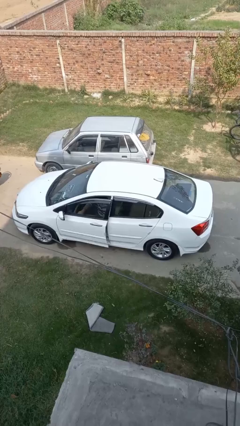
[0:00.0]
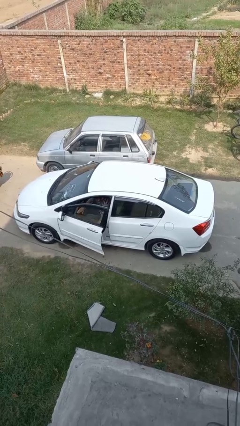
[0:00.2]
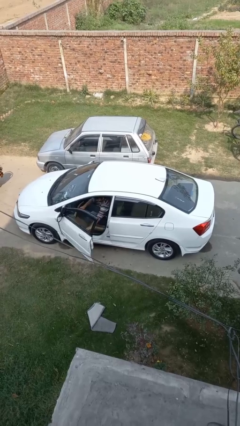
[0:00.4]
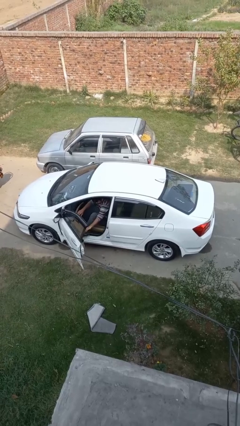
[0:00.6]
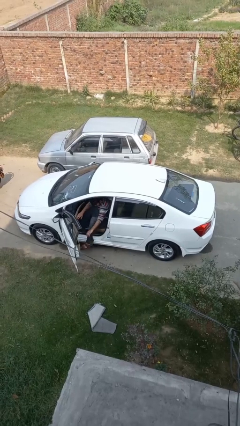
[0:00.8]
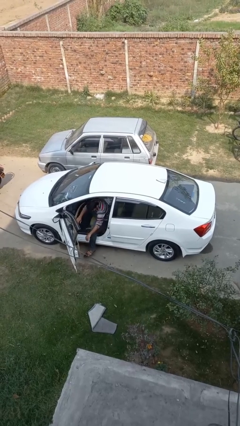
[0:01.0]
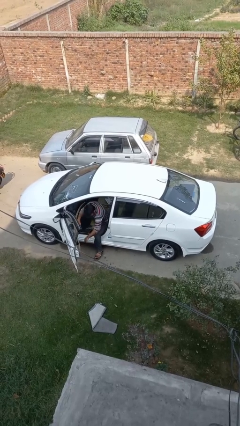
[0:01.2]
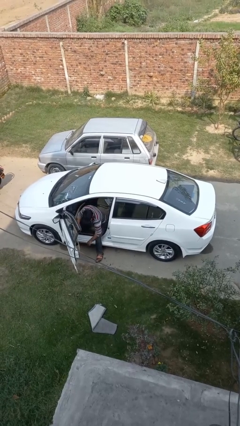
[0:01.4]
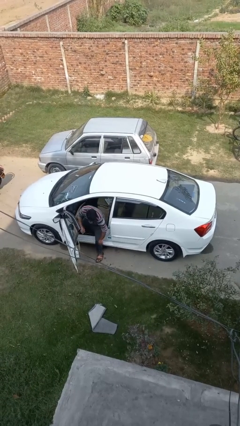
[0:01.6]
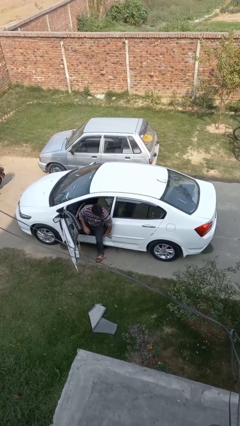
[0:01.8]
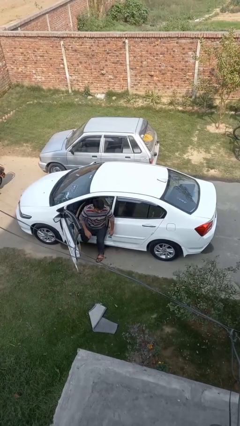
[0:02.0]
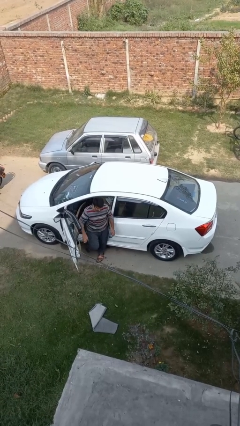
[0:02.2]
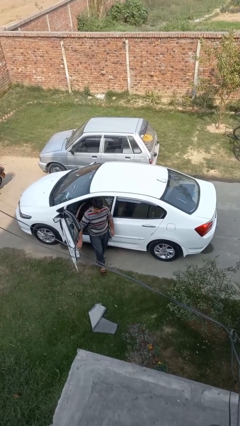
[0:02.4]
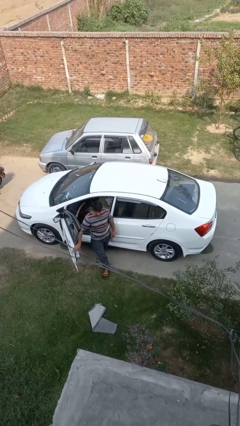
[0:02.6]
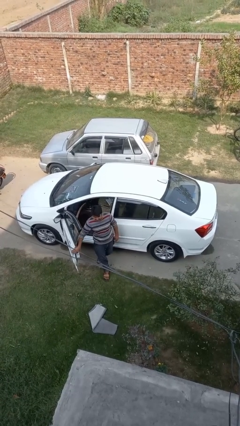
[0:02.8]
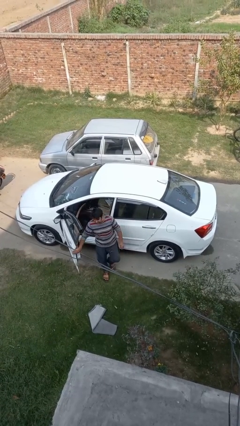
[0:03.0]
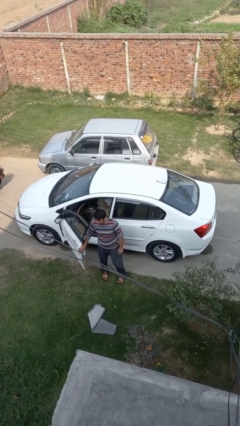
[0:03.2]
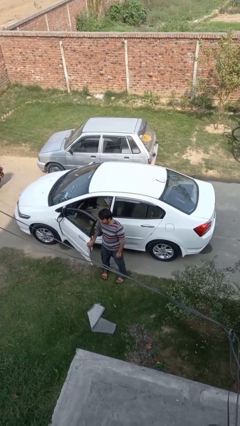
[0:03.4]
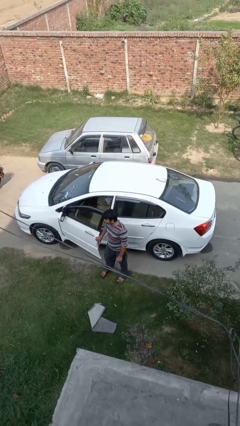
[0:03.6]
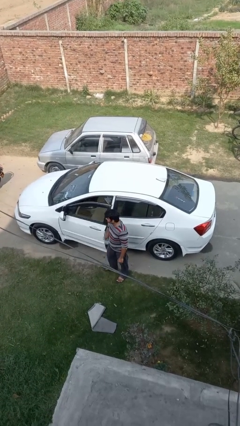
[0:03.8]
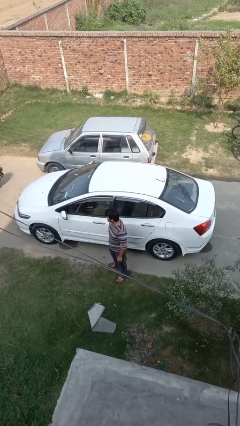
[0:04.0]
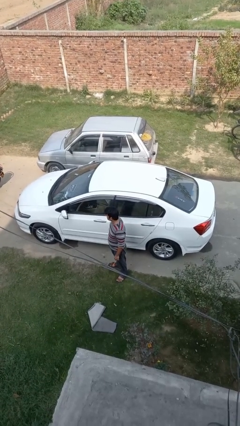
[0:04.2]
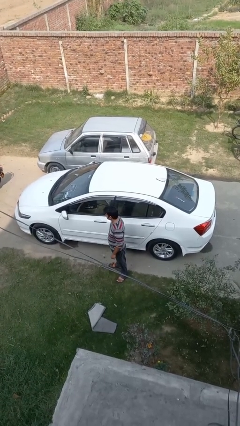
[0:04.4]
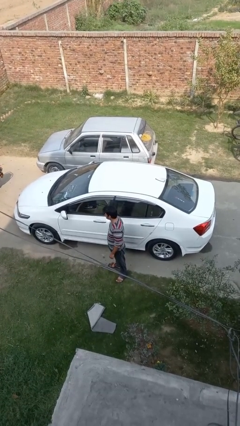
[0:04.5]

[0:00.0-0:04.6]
car drops off person

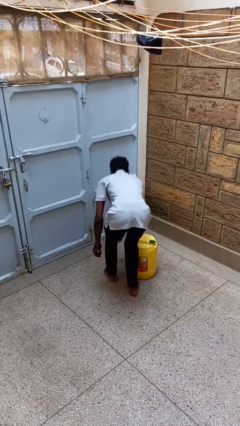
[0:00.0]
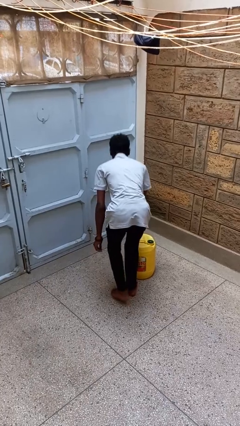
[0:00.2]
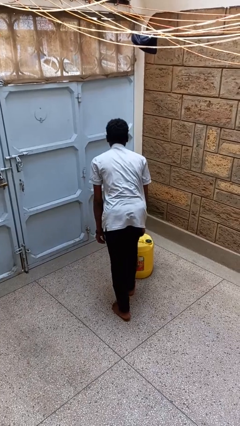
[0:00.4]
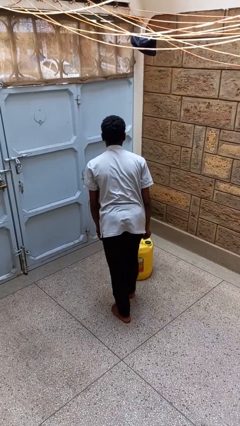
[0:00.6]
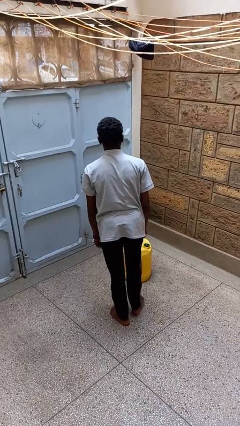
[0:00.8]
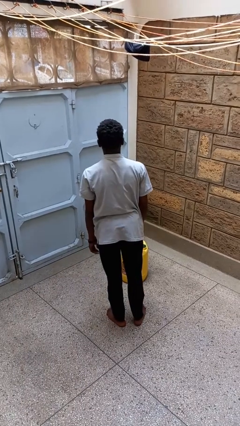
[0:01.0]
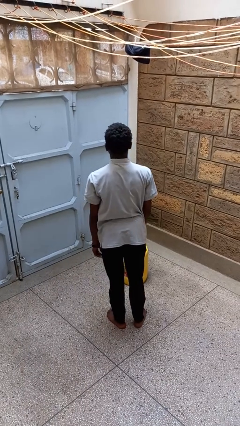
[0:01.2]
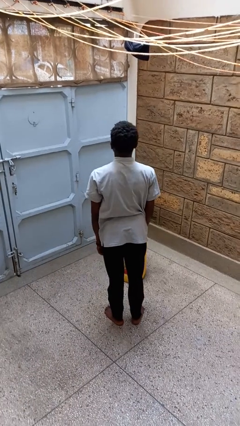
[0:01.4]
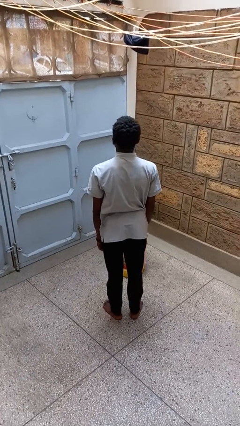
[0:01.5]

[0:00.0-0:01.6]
person stands up from floor

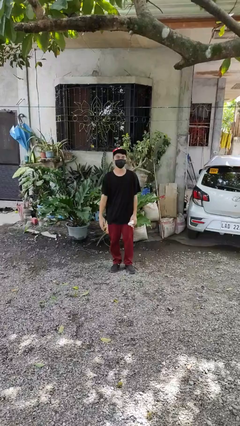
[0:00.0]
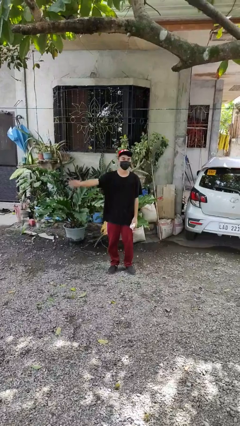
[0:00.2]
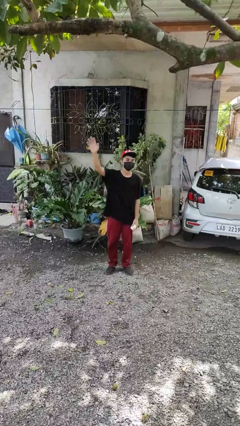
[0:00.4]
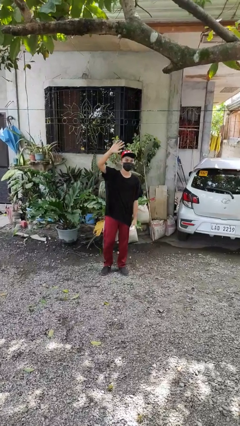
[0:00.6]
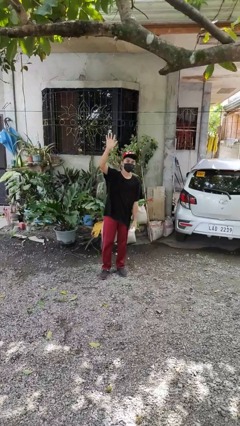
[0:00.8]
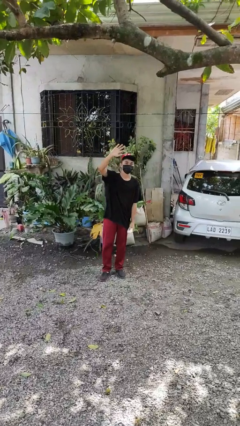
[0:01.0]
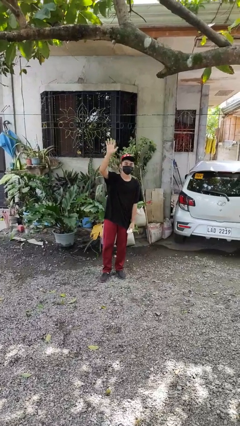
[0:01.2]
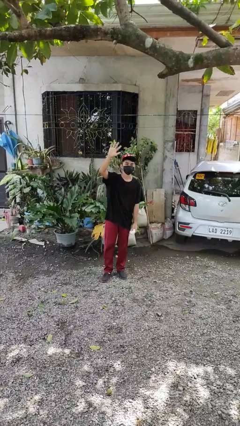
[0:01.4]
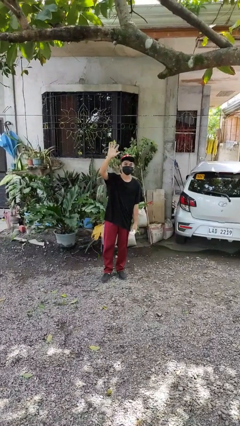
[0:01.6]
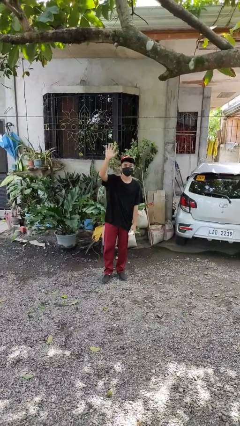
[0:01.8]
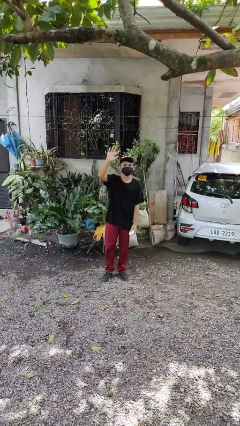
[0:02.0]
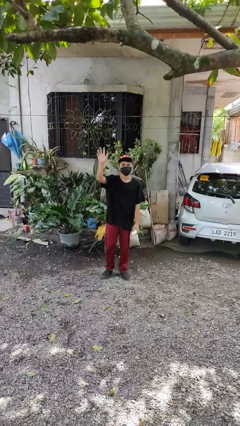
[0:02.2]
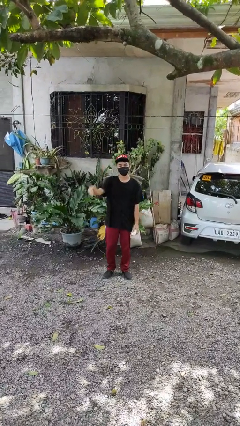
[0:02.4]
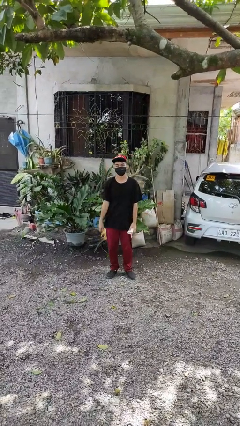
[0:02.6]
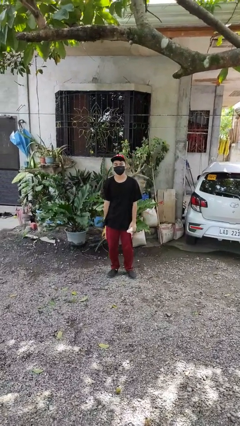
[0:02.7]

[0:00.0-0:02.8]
person waves at person

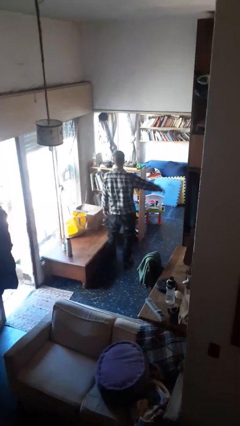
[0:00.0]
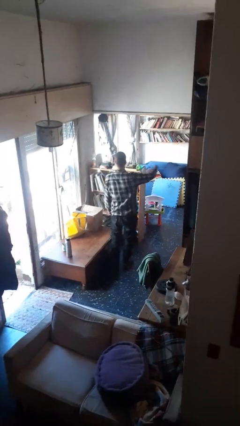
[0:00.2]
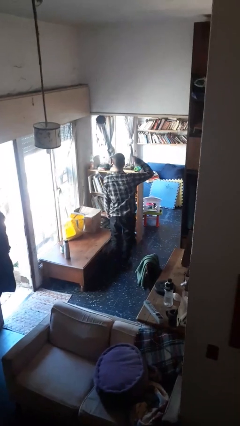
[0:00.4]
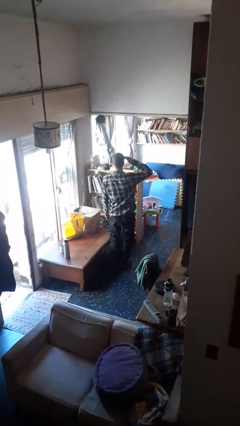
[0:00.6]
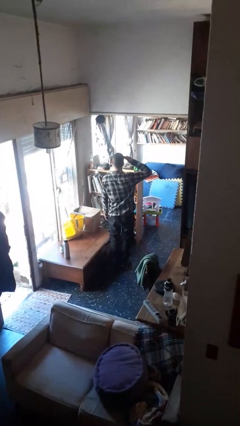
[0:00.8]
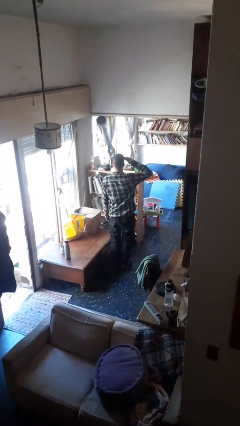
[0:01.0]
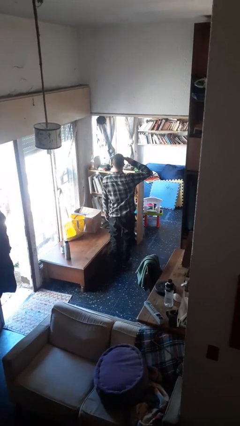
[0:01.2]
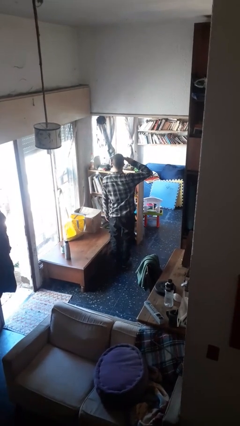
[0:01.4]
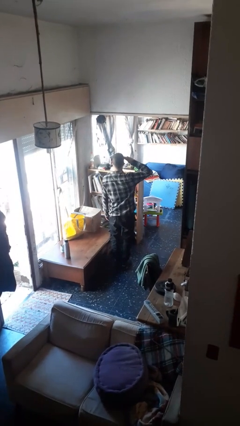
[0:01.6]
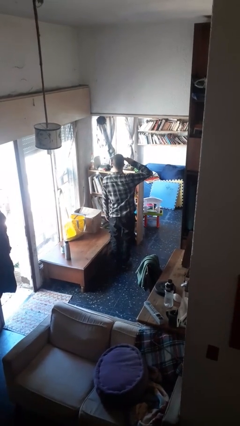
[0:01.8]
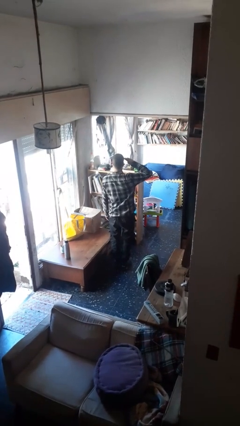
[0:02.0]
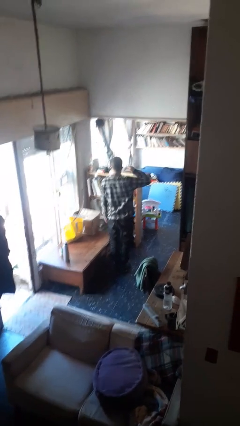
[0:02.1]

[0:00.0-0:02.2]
person salutes

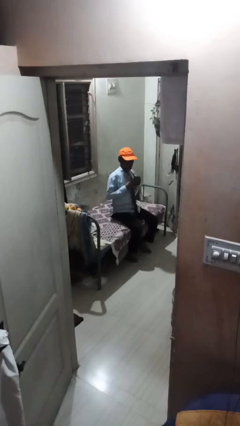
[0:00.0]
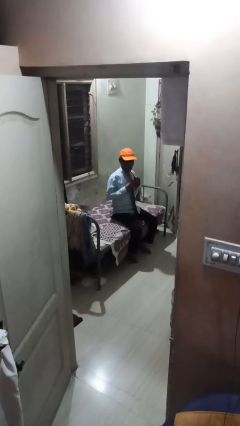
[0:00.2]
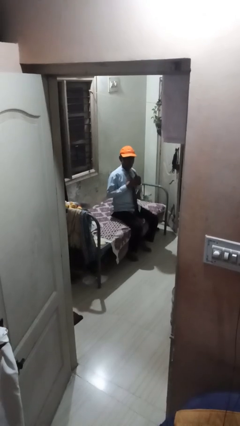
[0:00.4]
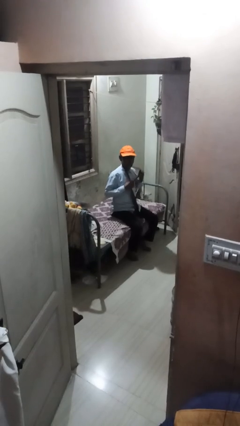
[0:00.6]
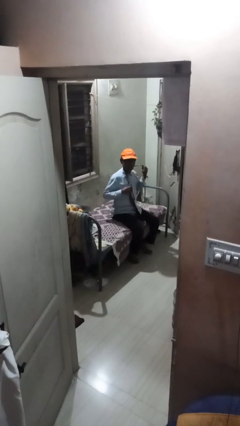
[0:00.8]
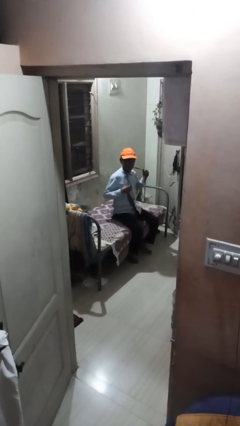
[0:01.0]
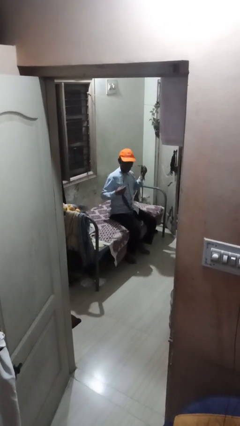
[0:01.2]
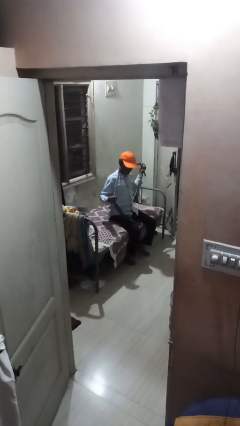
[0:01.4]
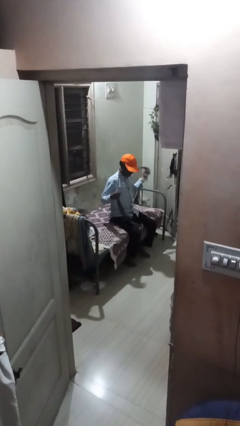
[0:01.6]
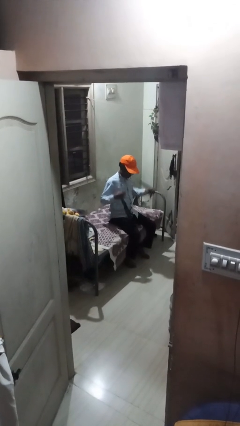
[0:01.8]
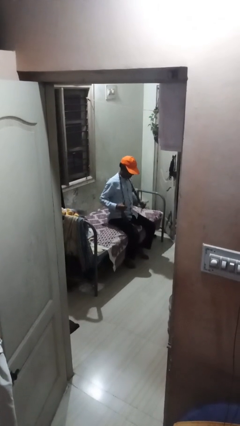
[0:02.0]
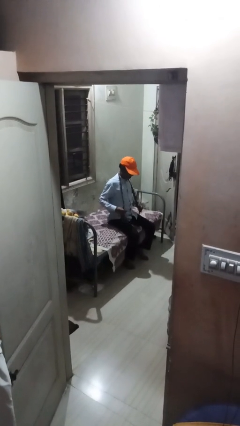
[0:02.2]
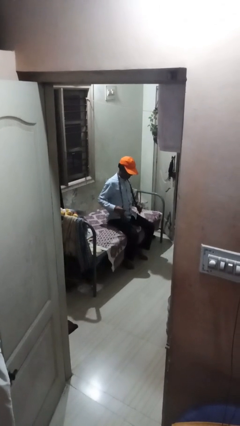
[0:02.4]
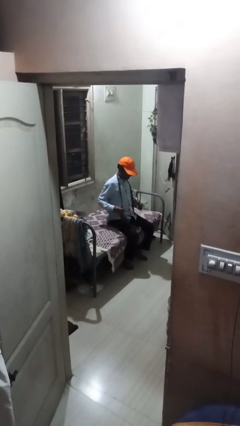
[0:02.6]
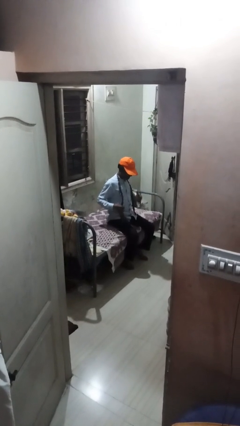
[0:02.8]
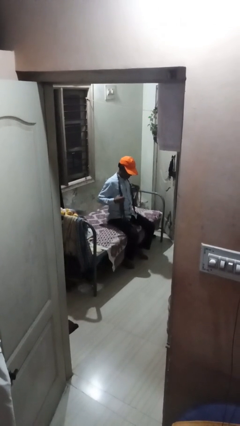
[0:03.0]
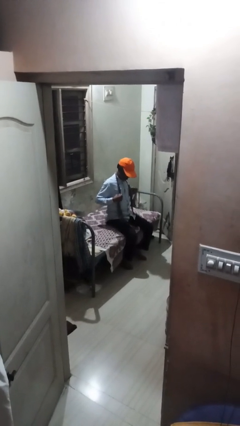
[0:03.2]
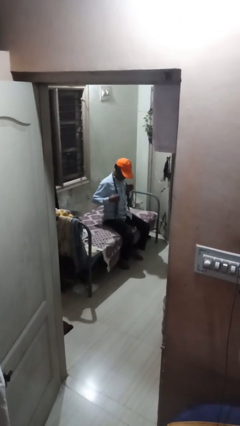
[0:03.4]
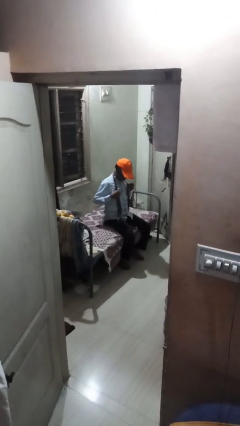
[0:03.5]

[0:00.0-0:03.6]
person takes off necktie

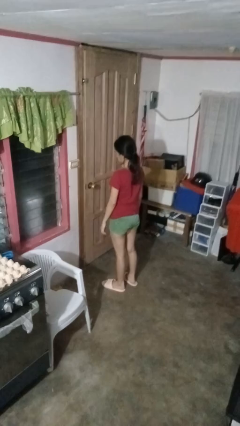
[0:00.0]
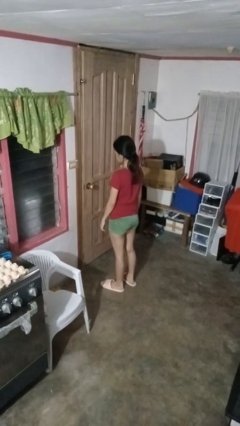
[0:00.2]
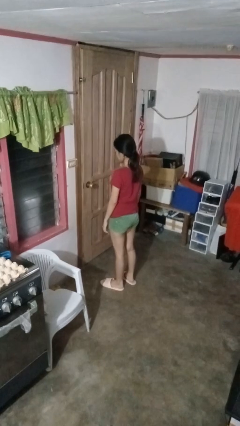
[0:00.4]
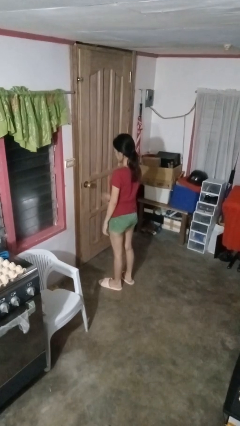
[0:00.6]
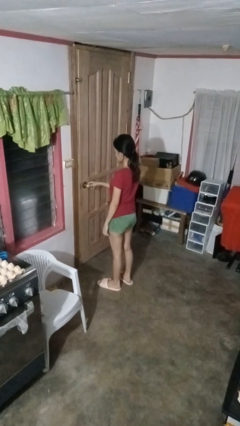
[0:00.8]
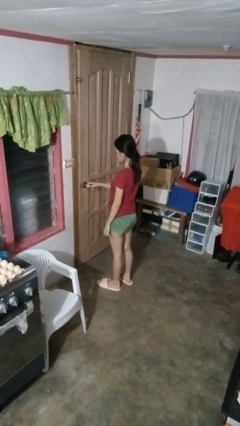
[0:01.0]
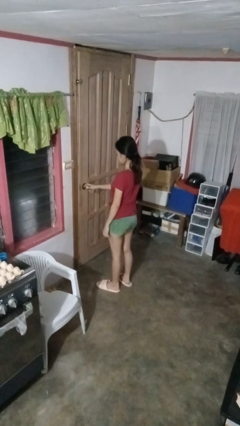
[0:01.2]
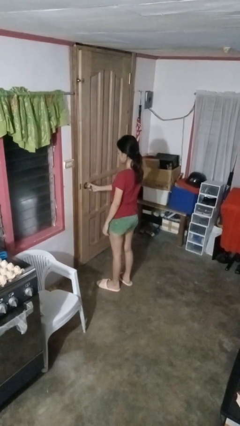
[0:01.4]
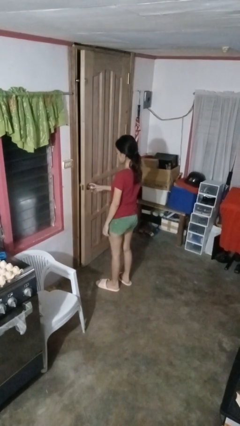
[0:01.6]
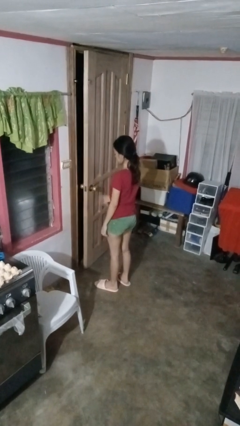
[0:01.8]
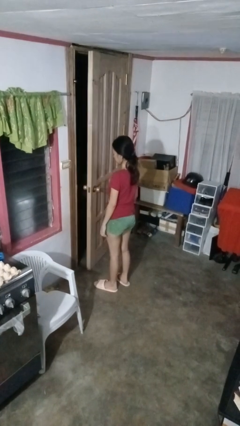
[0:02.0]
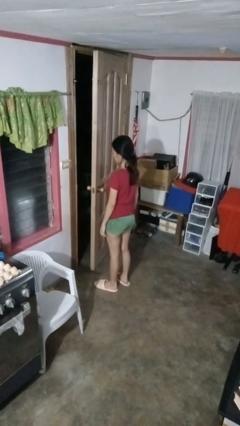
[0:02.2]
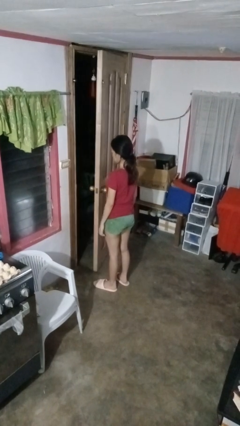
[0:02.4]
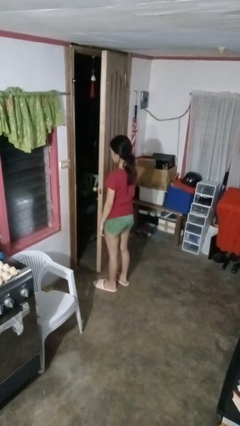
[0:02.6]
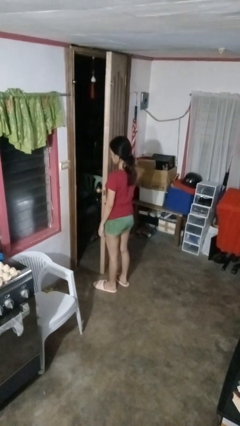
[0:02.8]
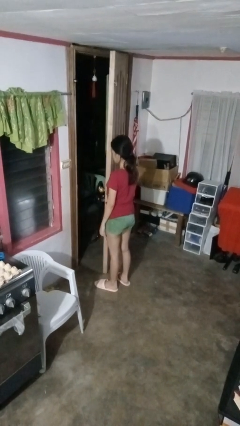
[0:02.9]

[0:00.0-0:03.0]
person opens facility door
